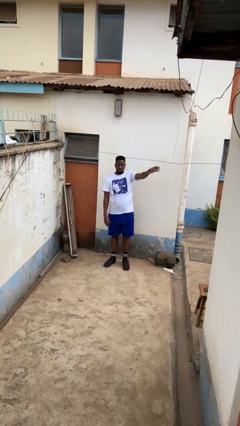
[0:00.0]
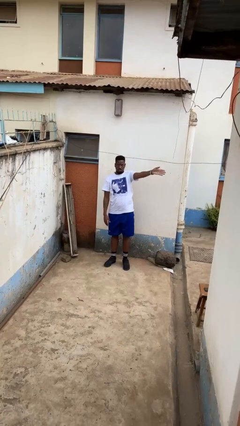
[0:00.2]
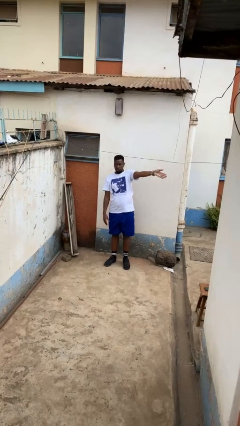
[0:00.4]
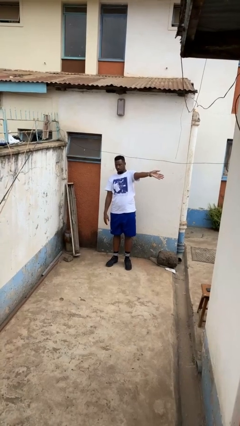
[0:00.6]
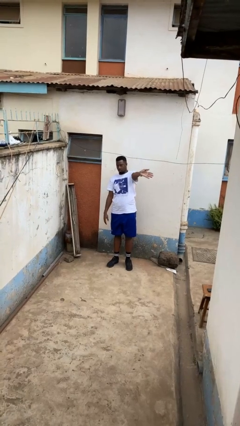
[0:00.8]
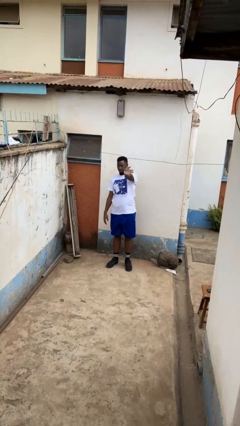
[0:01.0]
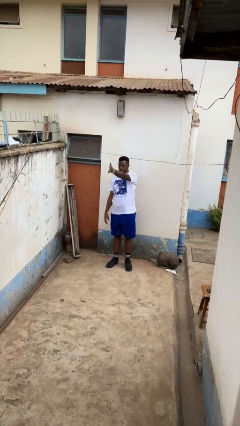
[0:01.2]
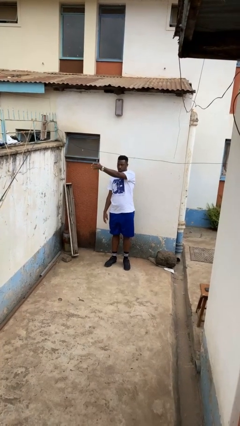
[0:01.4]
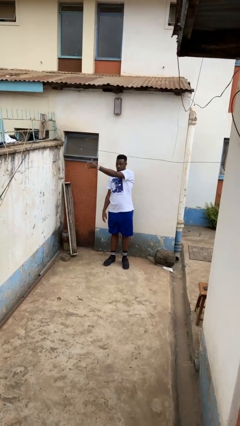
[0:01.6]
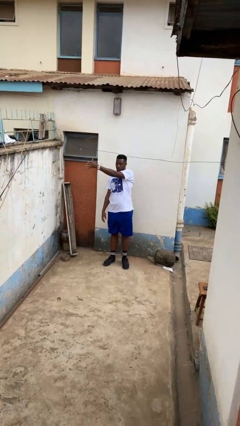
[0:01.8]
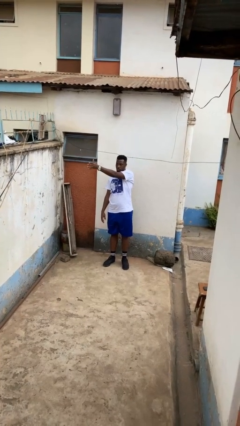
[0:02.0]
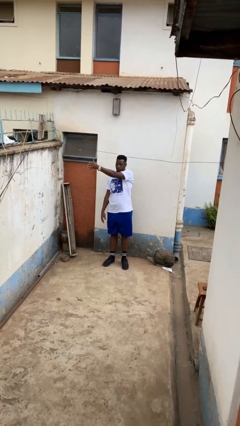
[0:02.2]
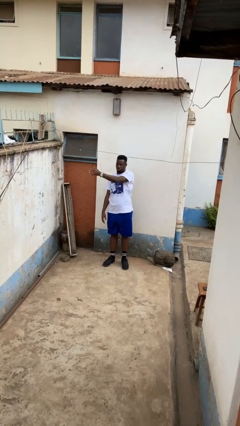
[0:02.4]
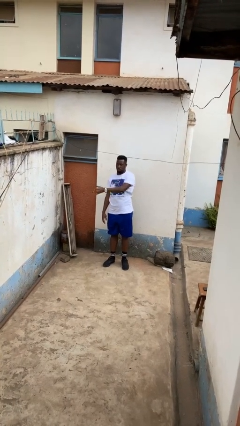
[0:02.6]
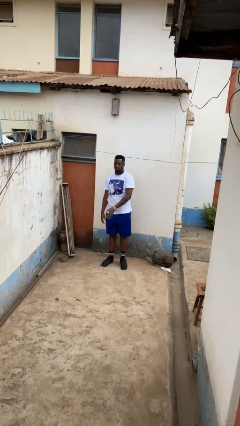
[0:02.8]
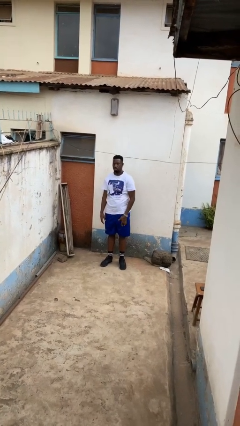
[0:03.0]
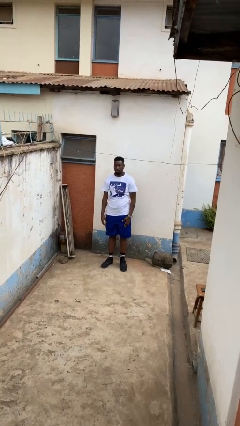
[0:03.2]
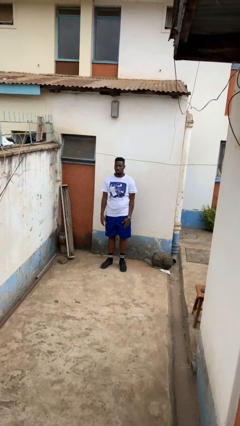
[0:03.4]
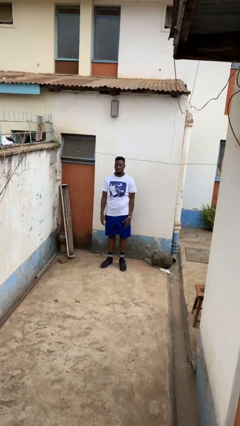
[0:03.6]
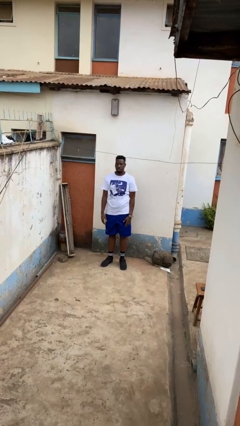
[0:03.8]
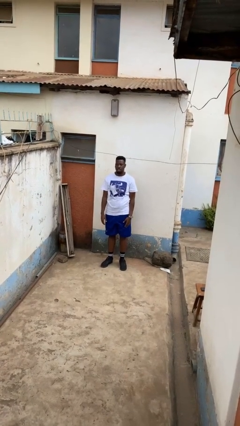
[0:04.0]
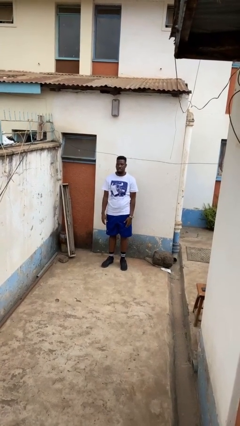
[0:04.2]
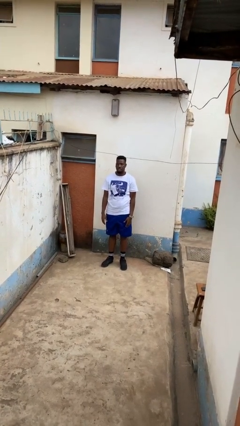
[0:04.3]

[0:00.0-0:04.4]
person gestures swipe right

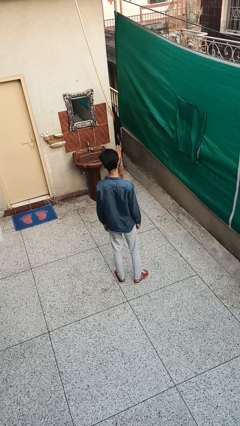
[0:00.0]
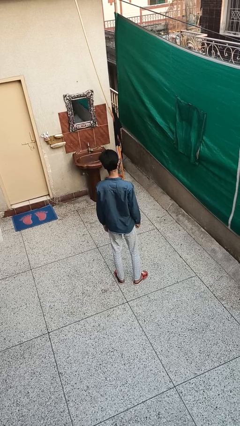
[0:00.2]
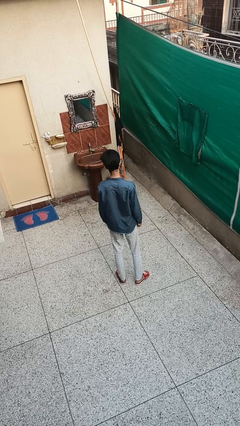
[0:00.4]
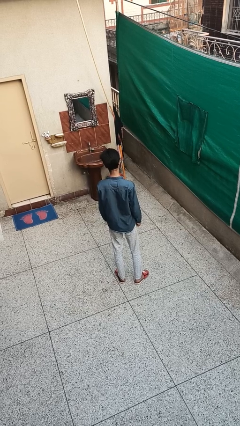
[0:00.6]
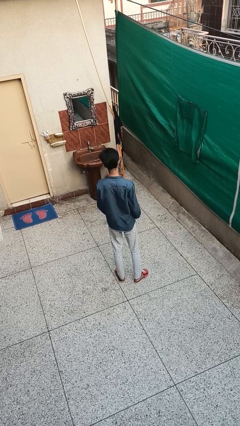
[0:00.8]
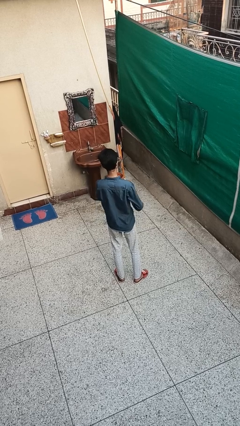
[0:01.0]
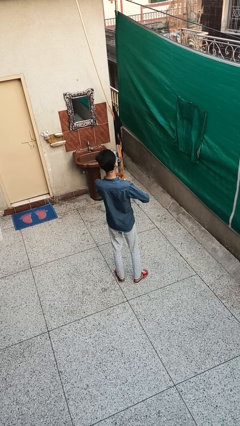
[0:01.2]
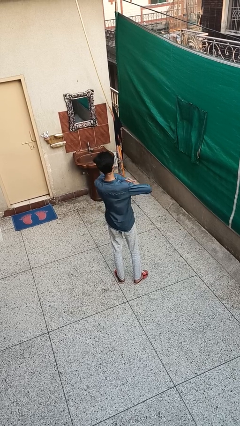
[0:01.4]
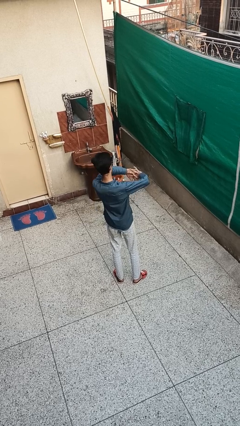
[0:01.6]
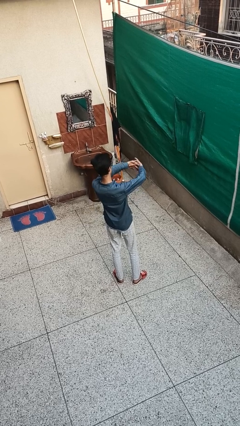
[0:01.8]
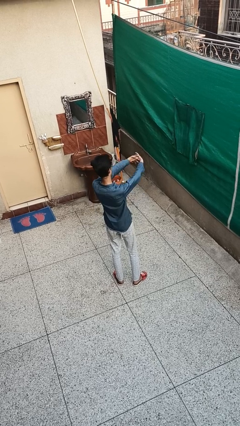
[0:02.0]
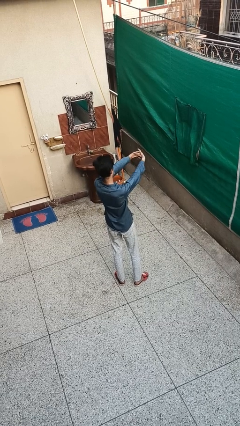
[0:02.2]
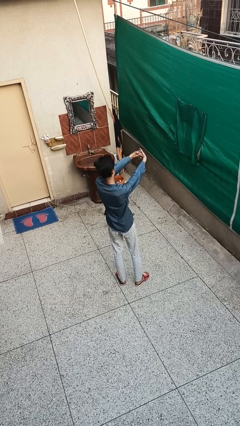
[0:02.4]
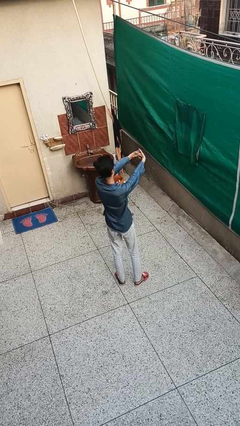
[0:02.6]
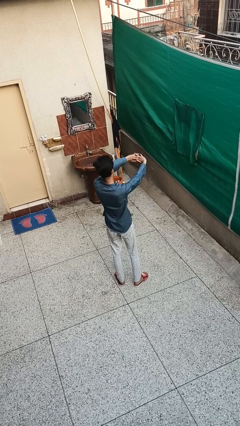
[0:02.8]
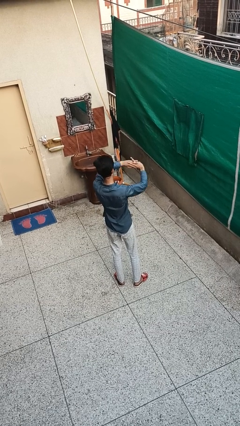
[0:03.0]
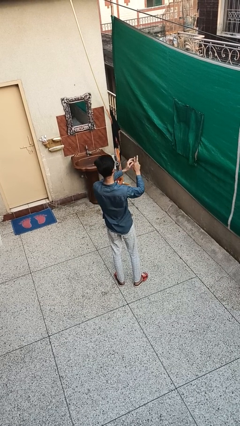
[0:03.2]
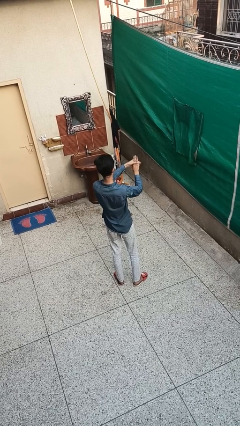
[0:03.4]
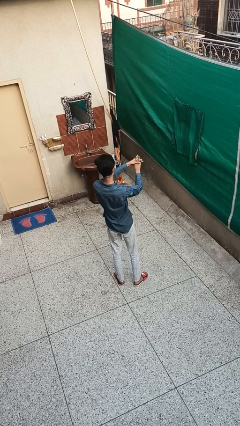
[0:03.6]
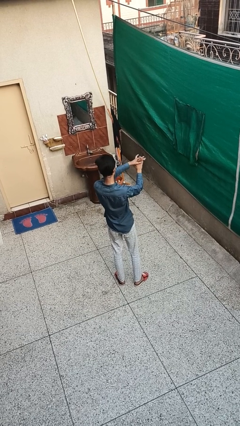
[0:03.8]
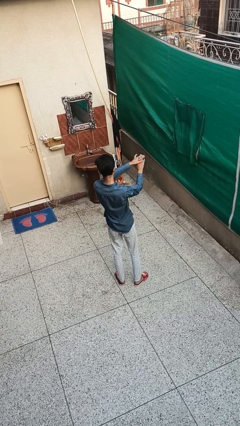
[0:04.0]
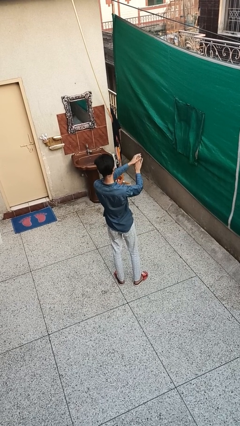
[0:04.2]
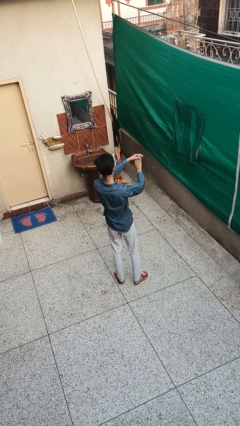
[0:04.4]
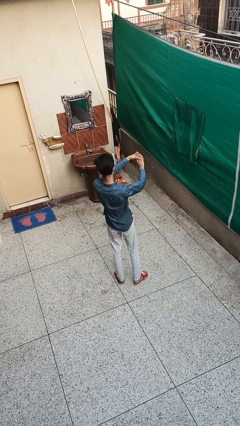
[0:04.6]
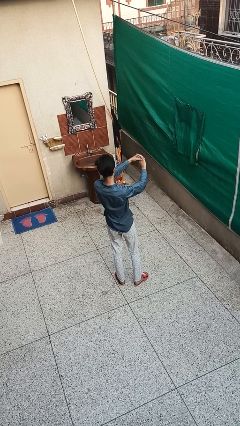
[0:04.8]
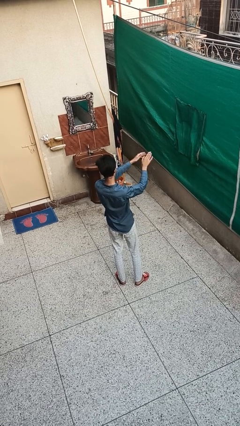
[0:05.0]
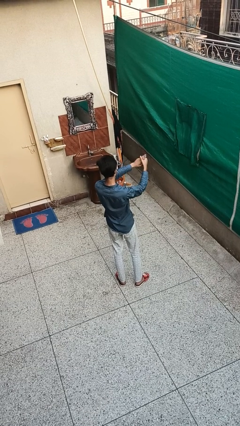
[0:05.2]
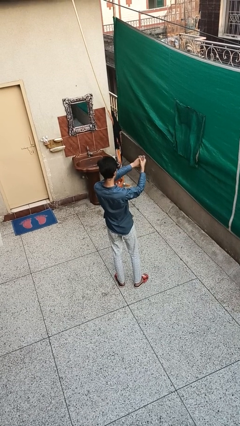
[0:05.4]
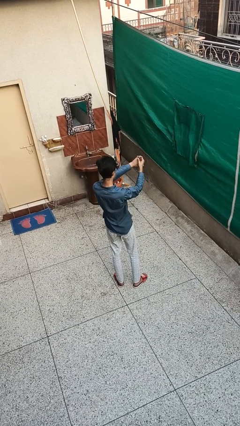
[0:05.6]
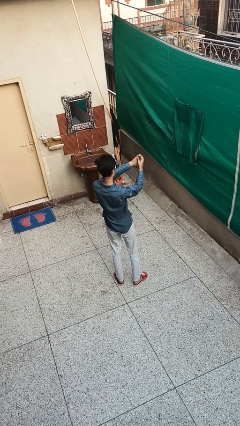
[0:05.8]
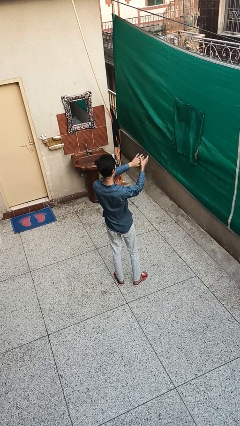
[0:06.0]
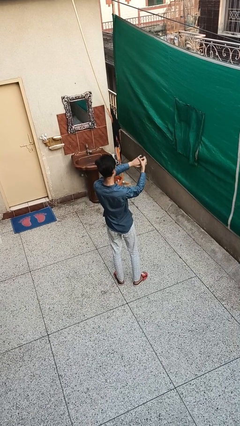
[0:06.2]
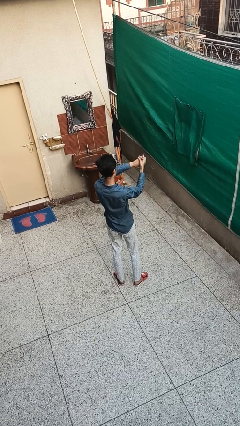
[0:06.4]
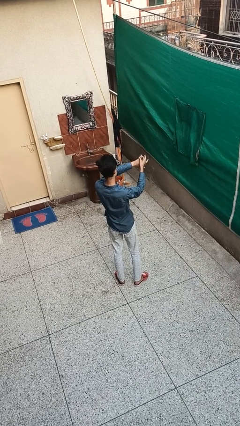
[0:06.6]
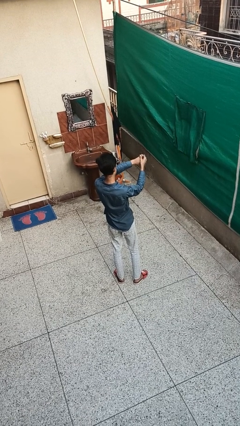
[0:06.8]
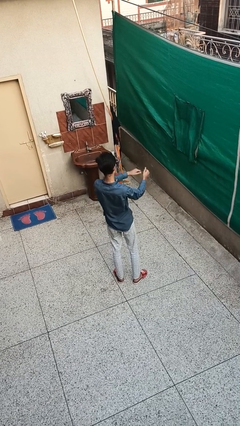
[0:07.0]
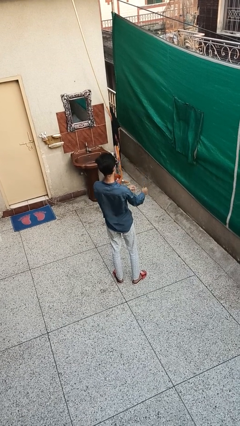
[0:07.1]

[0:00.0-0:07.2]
person cracks knuckles

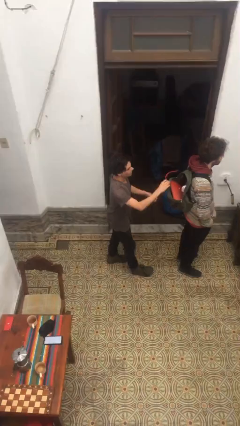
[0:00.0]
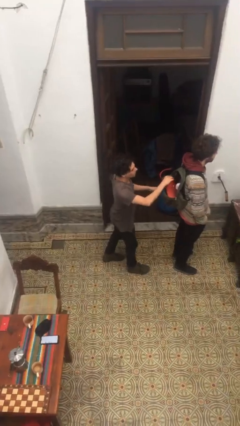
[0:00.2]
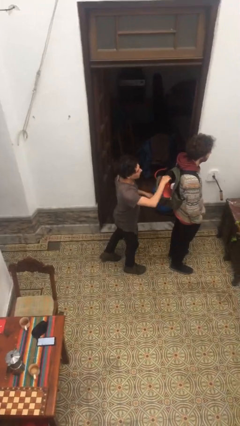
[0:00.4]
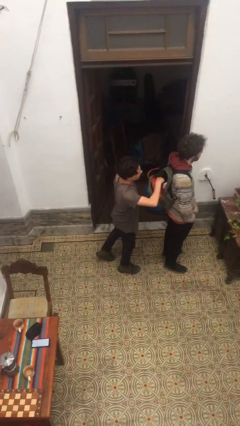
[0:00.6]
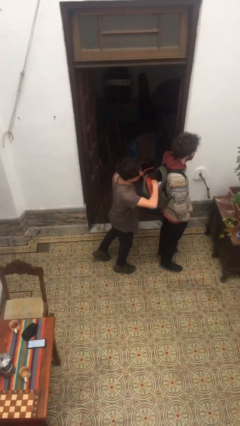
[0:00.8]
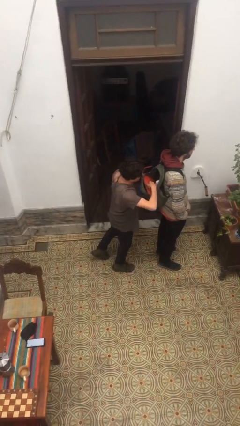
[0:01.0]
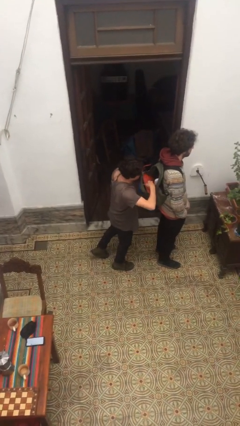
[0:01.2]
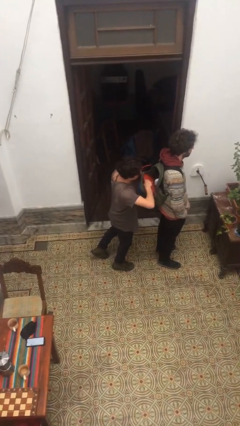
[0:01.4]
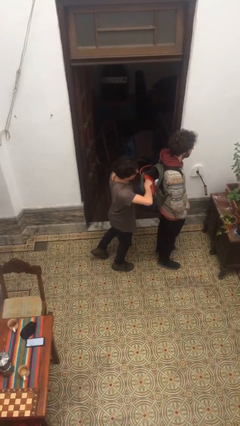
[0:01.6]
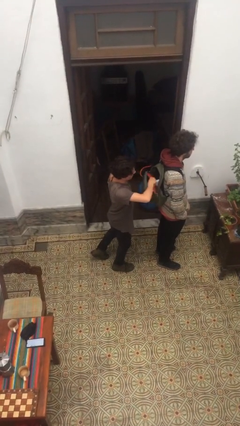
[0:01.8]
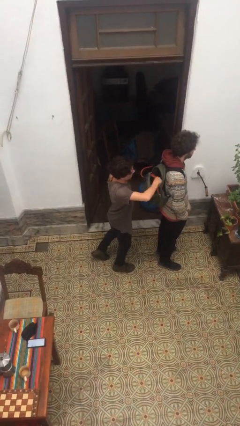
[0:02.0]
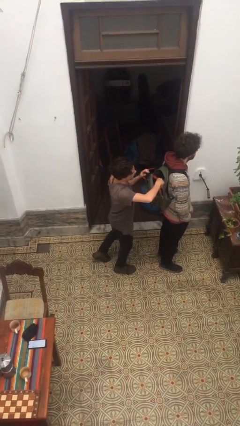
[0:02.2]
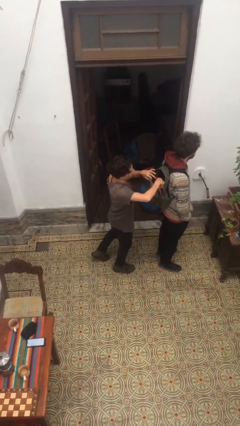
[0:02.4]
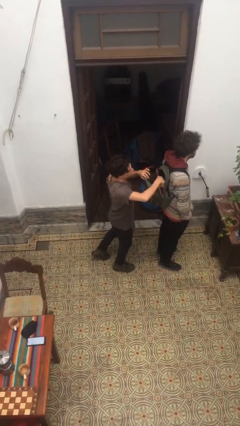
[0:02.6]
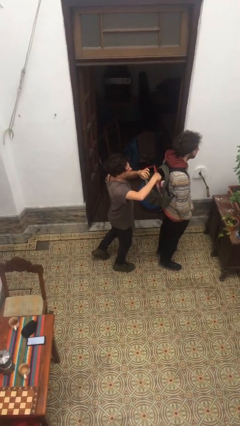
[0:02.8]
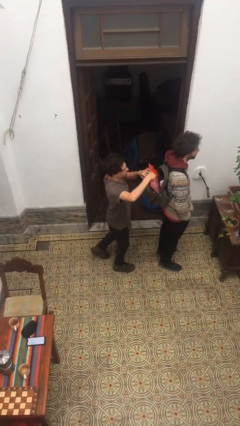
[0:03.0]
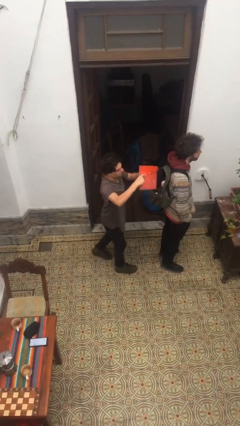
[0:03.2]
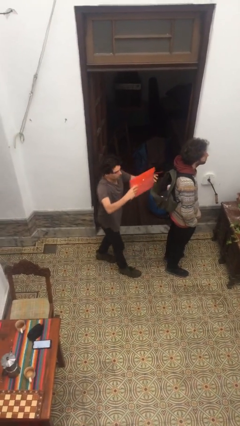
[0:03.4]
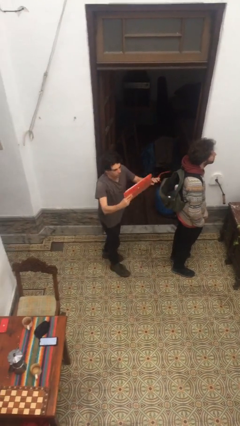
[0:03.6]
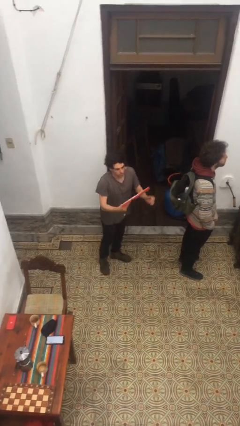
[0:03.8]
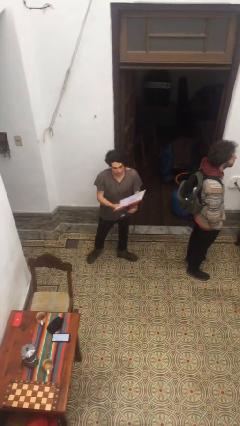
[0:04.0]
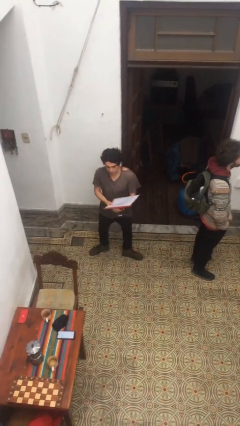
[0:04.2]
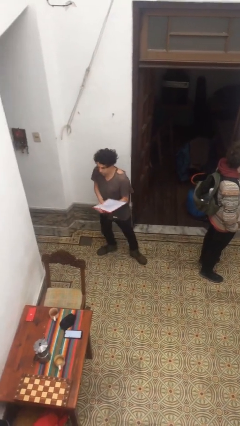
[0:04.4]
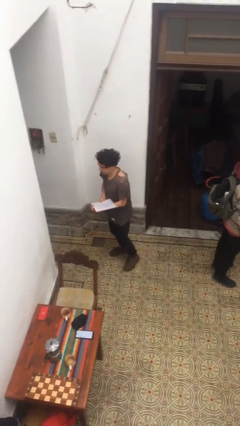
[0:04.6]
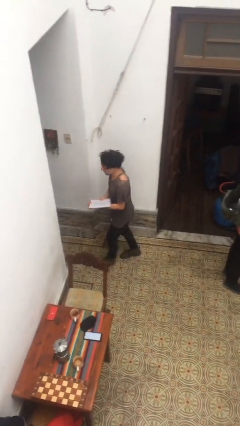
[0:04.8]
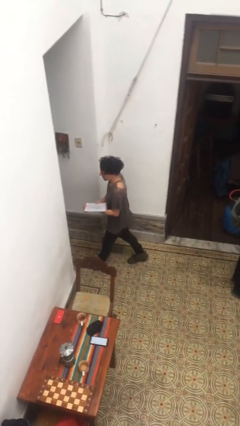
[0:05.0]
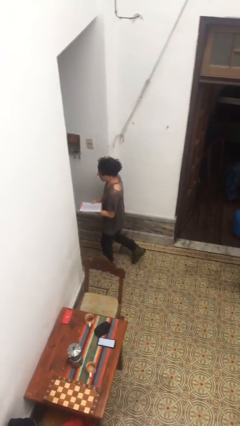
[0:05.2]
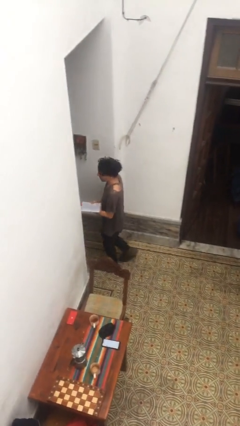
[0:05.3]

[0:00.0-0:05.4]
person steals object from person

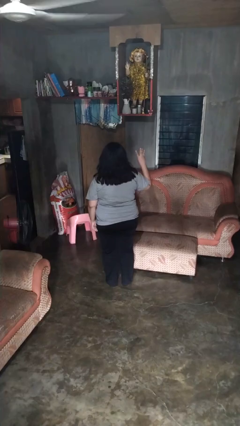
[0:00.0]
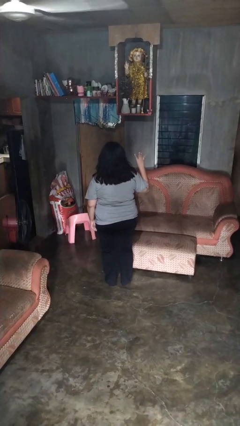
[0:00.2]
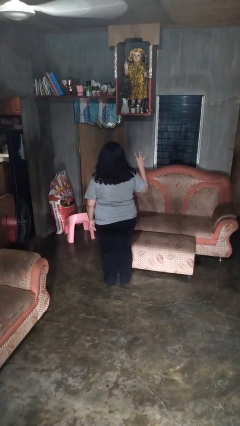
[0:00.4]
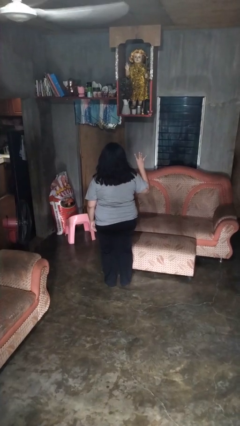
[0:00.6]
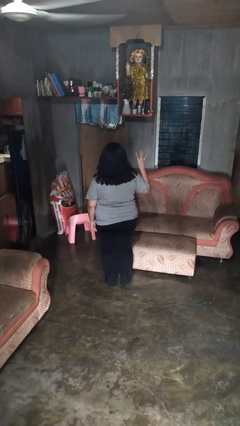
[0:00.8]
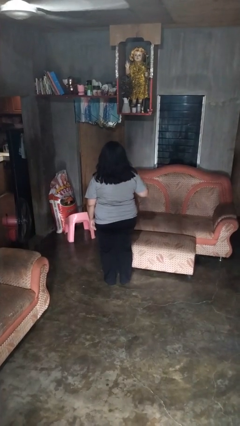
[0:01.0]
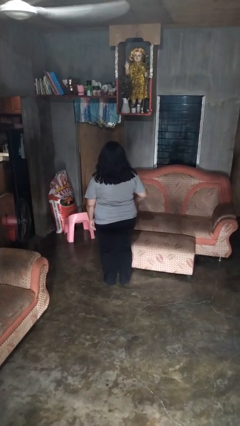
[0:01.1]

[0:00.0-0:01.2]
person gestures number four
